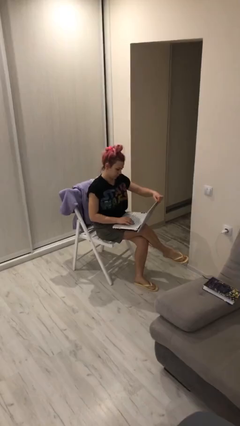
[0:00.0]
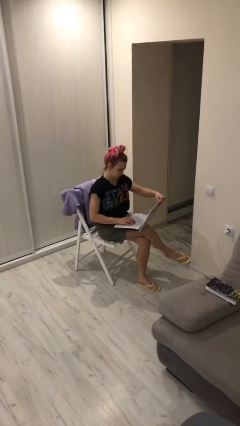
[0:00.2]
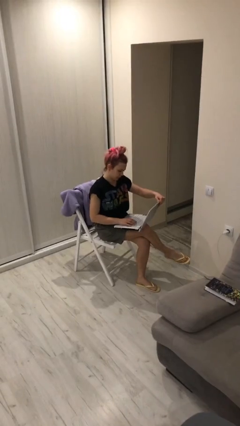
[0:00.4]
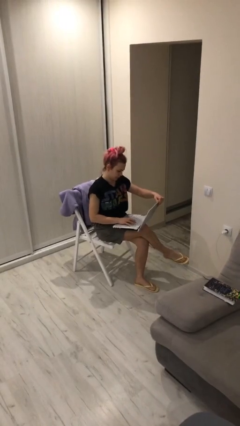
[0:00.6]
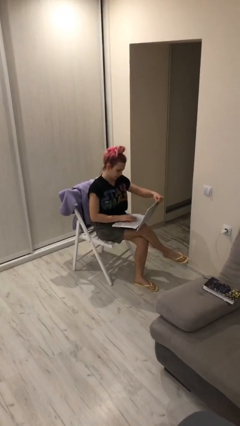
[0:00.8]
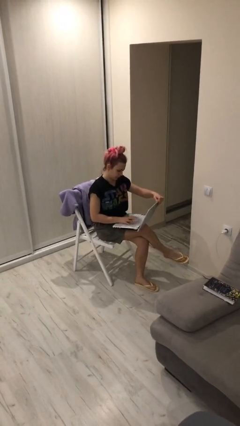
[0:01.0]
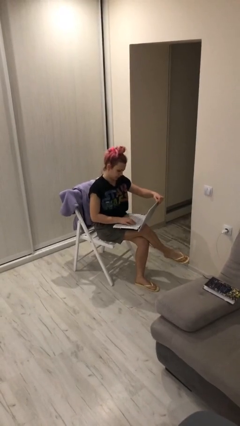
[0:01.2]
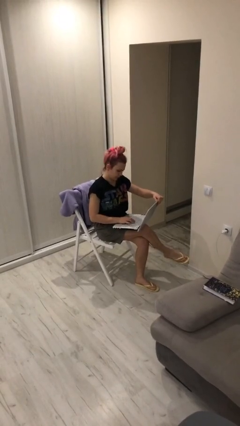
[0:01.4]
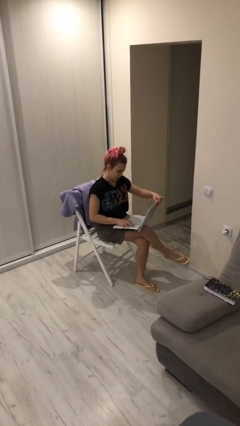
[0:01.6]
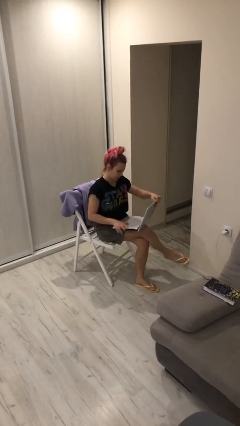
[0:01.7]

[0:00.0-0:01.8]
person interacts with laptop

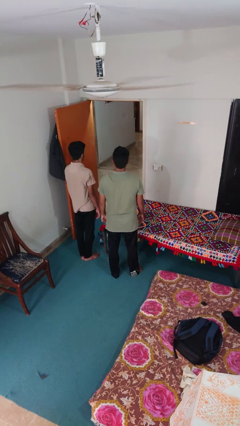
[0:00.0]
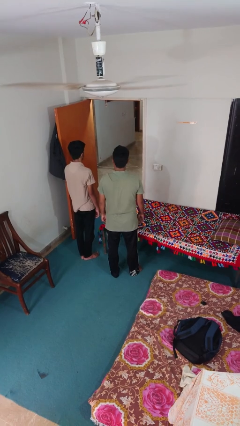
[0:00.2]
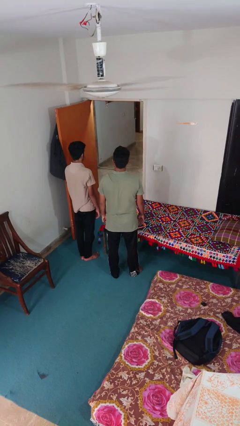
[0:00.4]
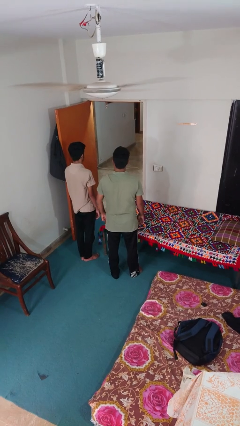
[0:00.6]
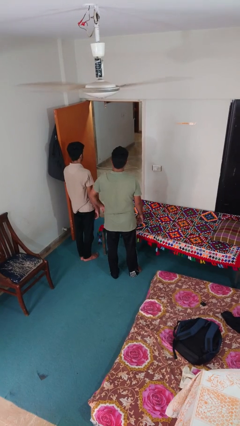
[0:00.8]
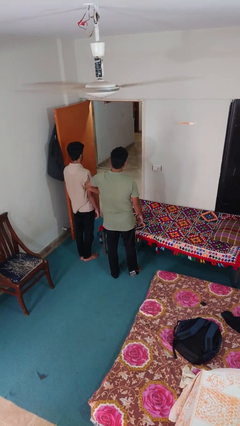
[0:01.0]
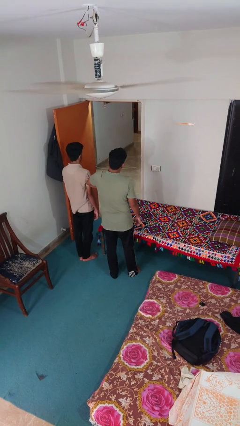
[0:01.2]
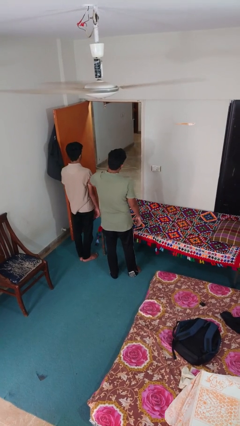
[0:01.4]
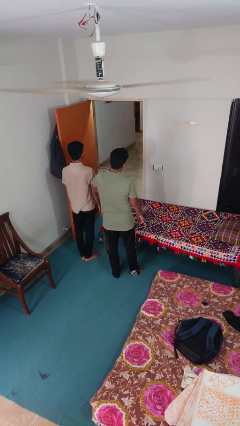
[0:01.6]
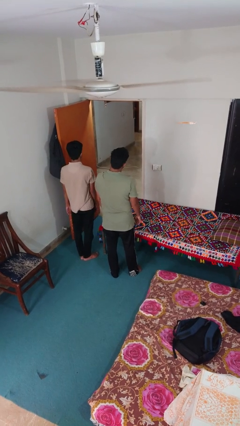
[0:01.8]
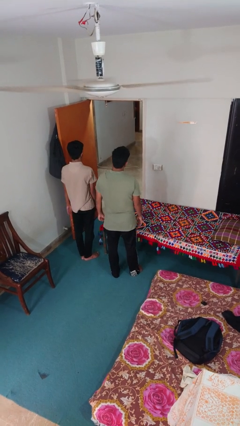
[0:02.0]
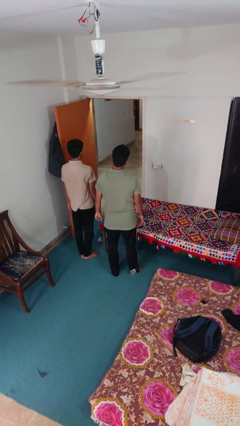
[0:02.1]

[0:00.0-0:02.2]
person nudges person with elbow

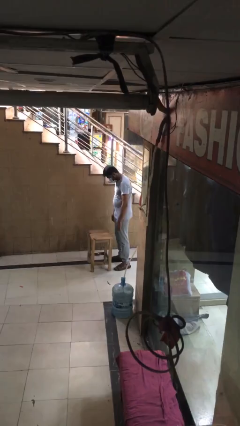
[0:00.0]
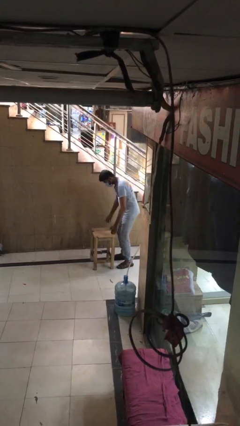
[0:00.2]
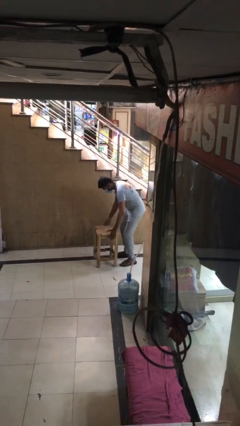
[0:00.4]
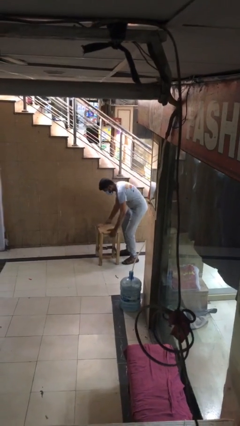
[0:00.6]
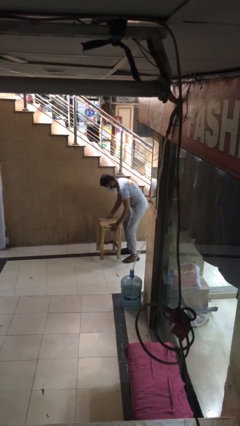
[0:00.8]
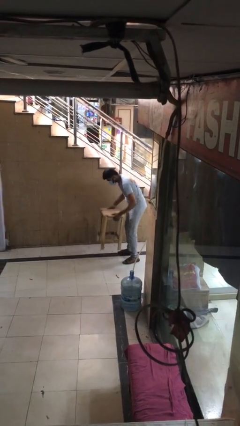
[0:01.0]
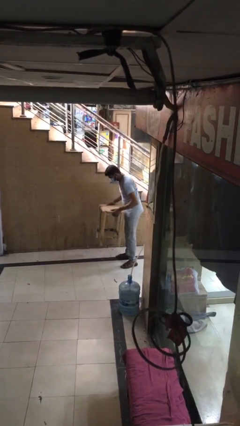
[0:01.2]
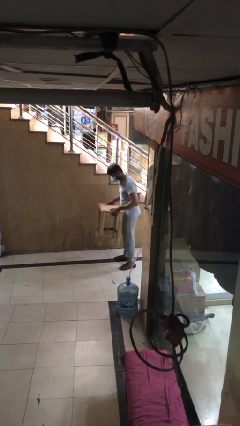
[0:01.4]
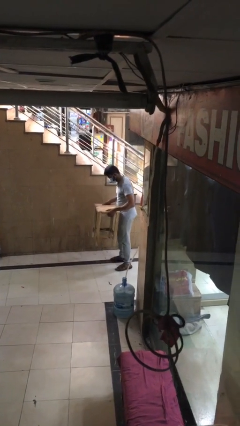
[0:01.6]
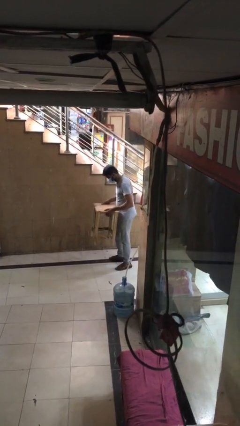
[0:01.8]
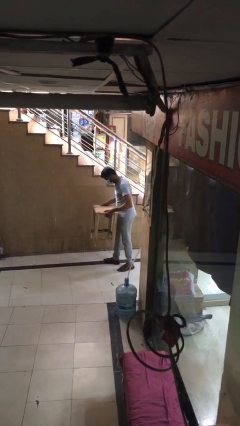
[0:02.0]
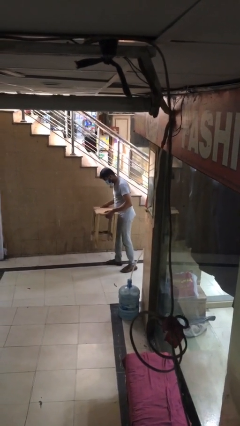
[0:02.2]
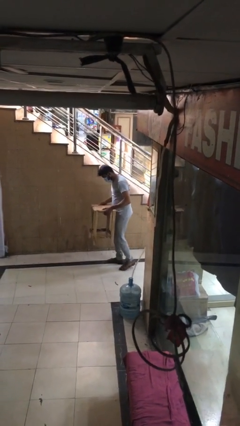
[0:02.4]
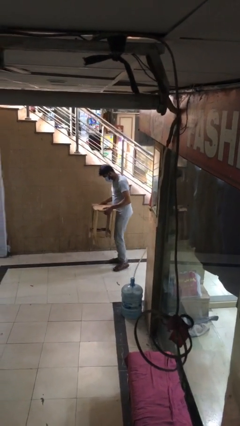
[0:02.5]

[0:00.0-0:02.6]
person picks up object from floor

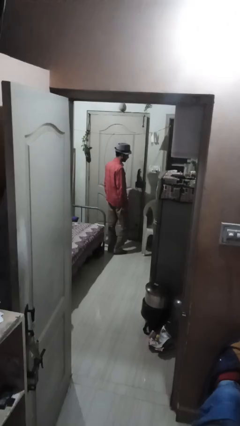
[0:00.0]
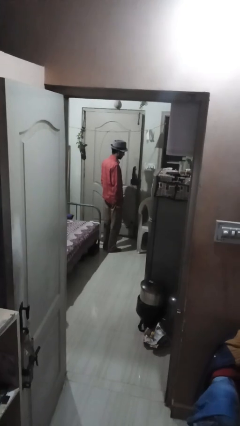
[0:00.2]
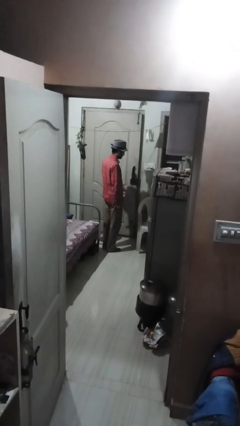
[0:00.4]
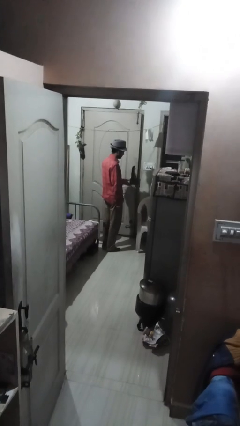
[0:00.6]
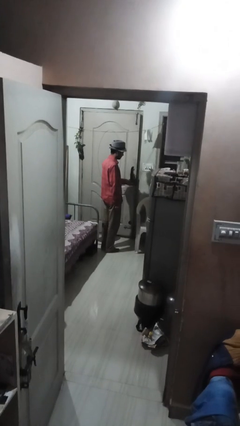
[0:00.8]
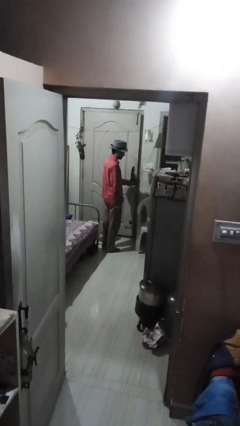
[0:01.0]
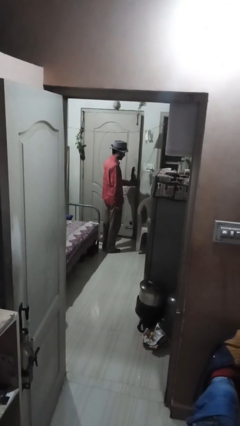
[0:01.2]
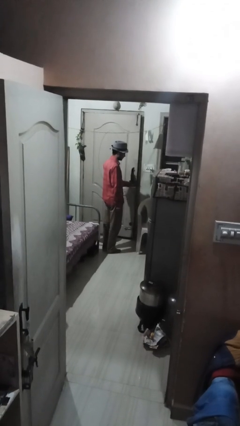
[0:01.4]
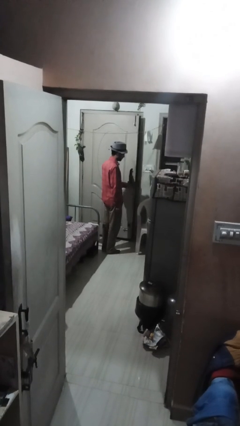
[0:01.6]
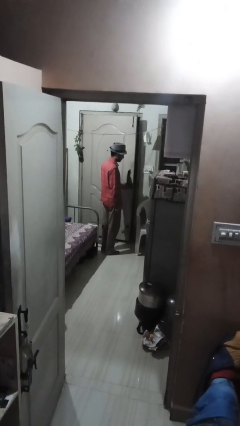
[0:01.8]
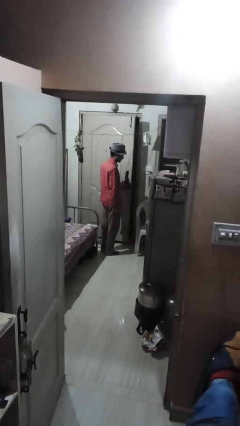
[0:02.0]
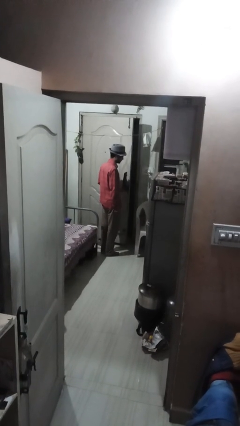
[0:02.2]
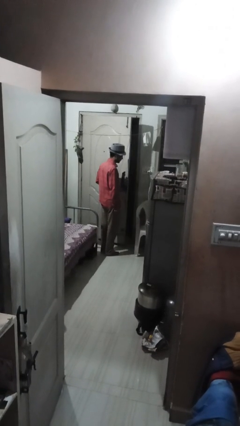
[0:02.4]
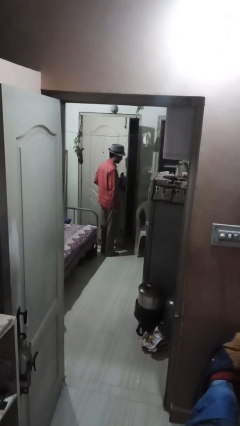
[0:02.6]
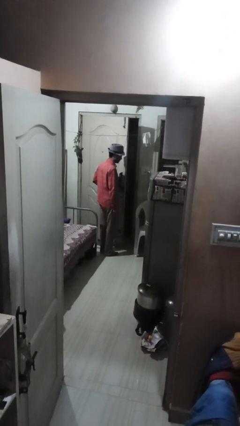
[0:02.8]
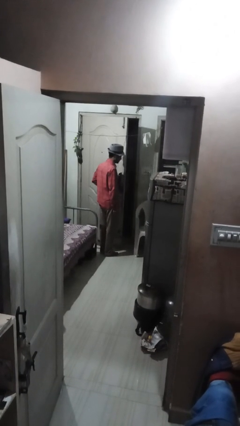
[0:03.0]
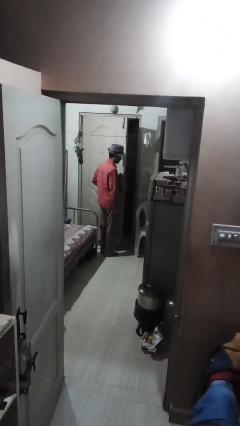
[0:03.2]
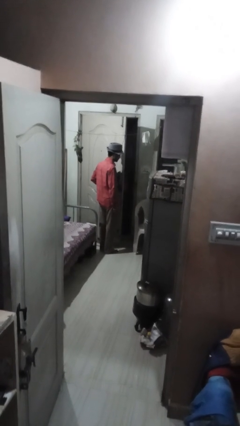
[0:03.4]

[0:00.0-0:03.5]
person opens facility door

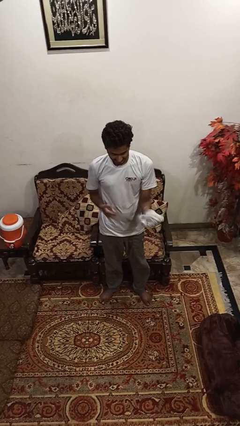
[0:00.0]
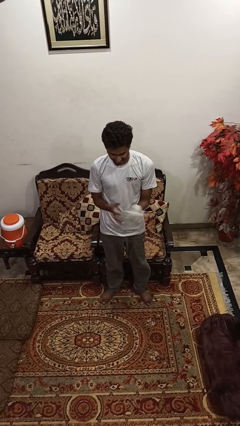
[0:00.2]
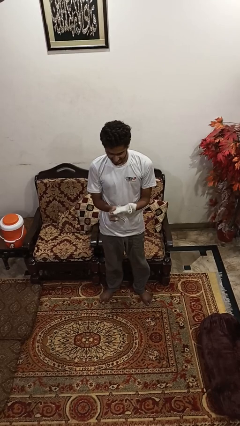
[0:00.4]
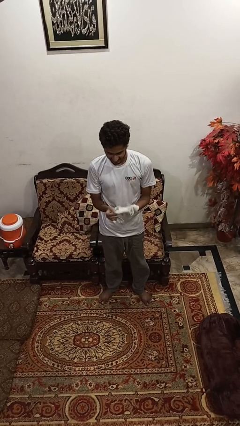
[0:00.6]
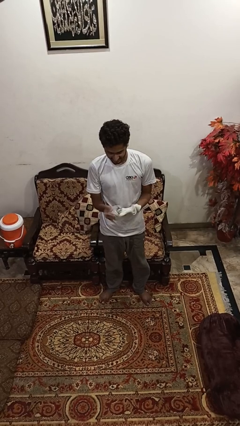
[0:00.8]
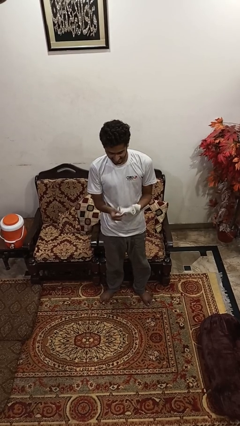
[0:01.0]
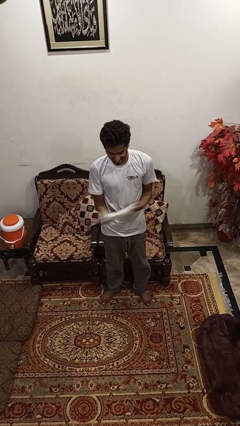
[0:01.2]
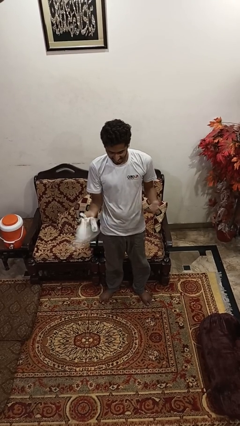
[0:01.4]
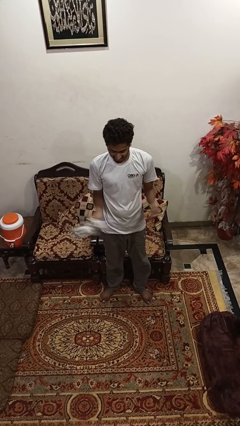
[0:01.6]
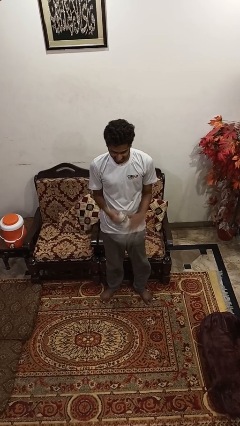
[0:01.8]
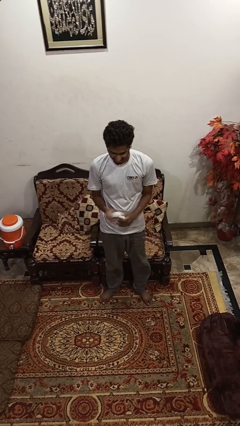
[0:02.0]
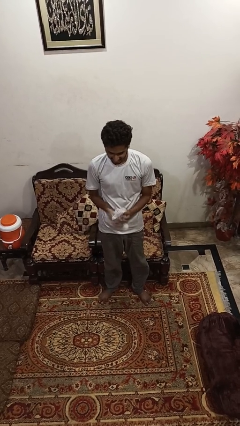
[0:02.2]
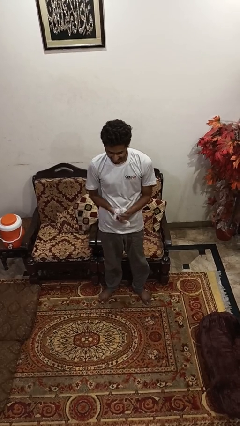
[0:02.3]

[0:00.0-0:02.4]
person takes off gloves

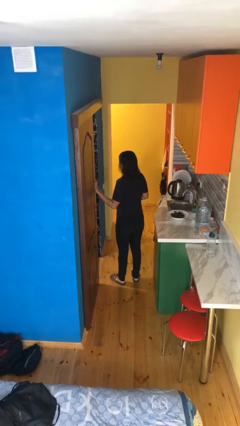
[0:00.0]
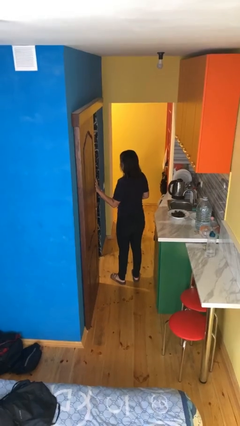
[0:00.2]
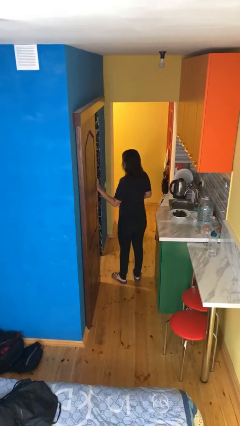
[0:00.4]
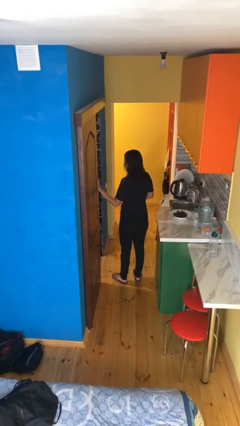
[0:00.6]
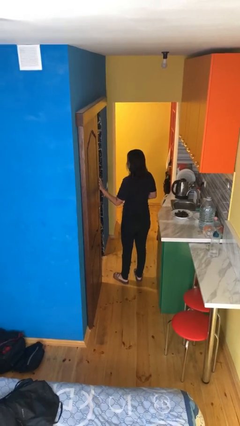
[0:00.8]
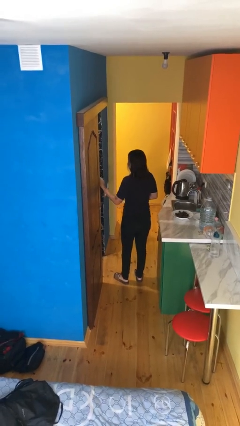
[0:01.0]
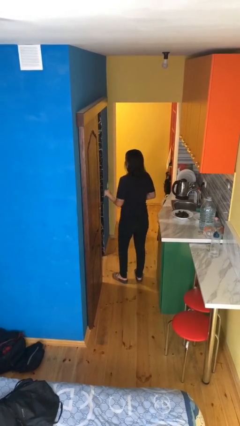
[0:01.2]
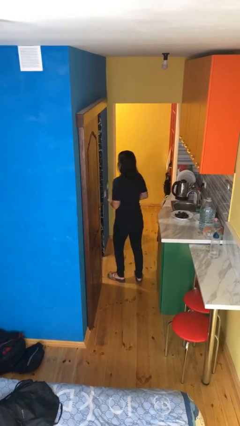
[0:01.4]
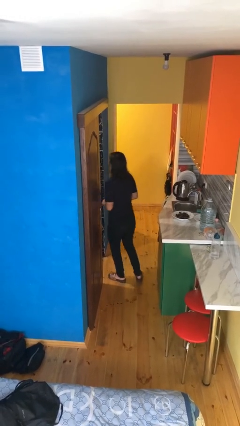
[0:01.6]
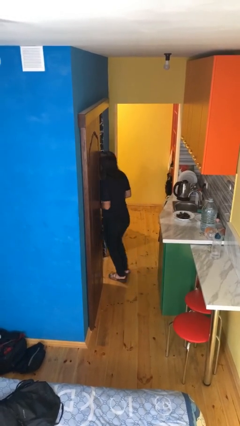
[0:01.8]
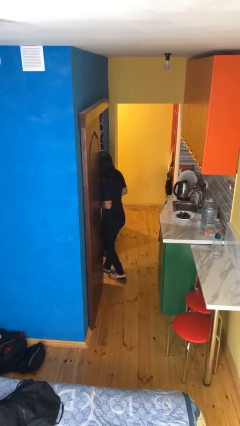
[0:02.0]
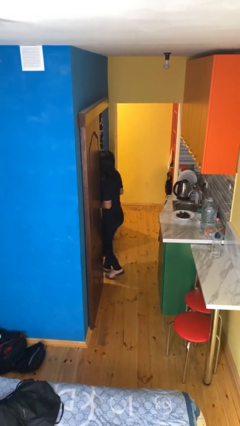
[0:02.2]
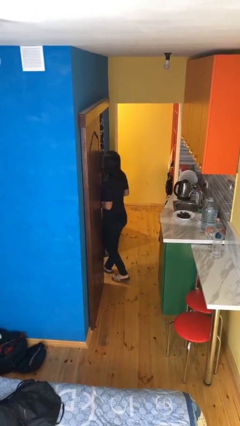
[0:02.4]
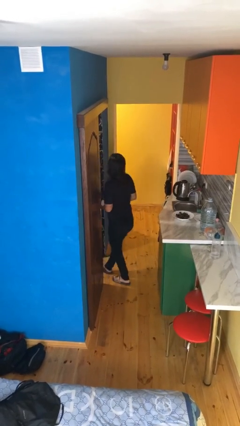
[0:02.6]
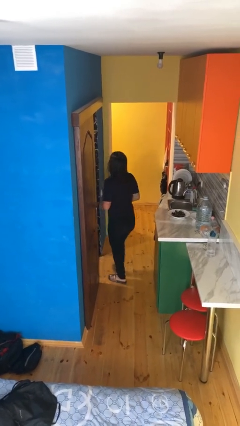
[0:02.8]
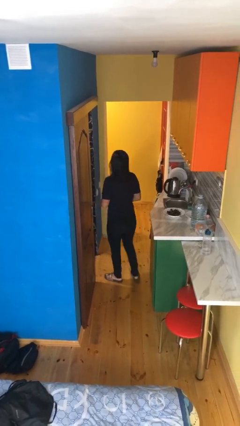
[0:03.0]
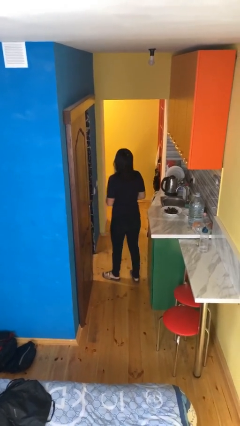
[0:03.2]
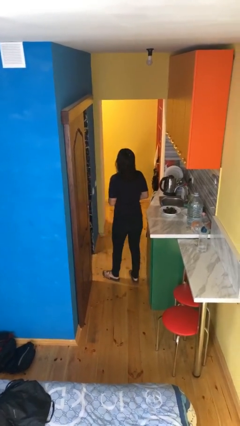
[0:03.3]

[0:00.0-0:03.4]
person bumps into wall

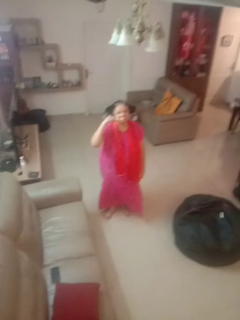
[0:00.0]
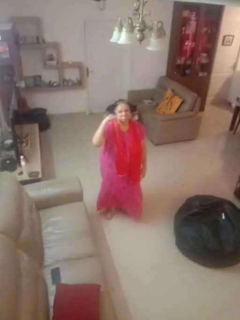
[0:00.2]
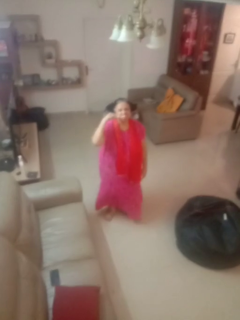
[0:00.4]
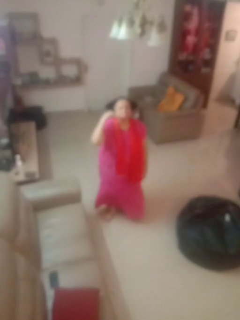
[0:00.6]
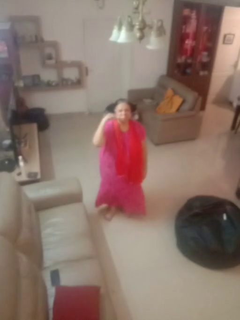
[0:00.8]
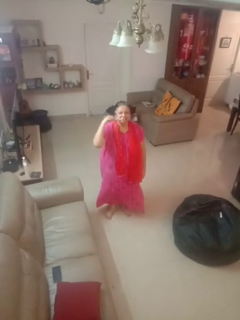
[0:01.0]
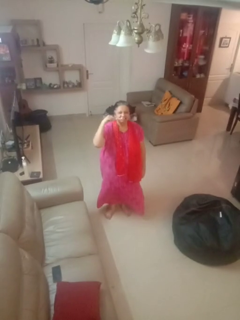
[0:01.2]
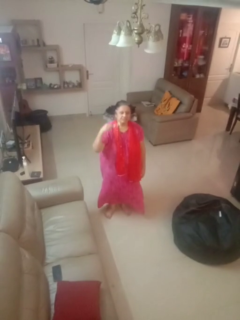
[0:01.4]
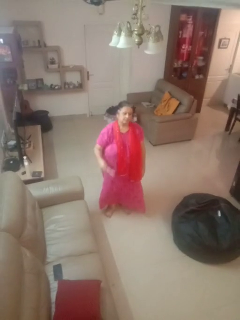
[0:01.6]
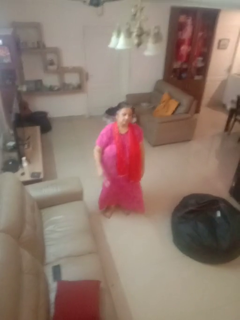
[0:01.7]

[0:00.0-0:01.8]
person brushes teeth

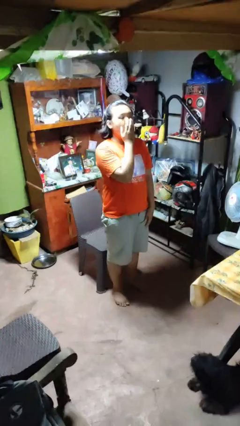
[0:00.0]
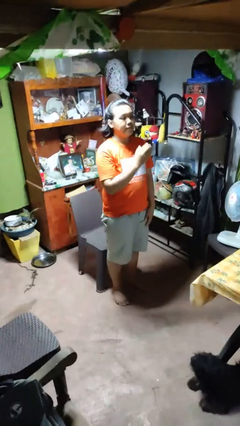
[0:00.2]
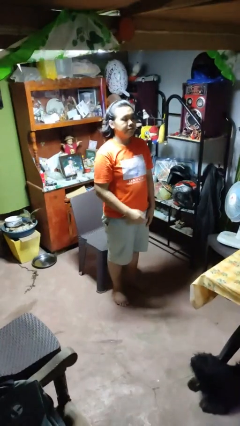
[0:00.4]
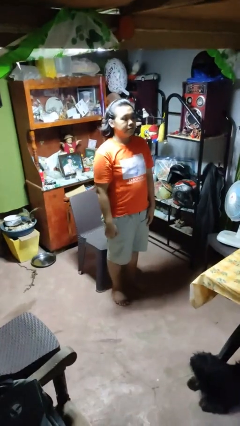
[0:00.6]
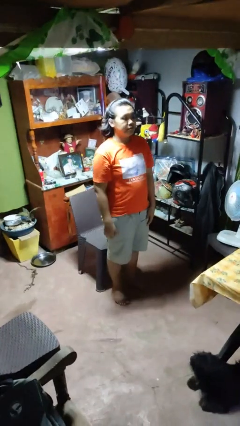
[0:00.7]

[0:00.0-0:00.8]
person yawns
